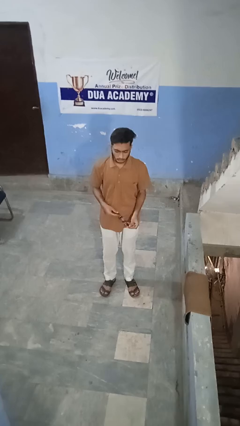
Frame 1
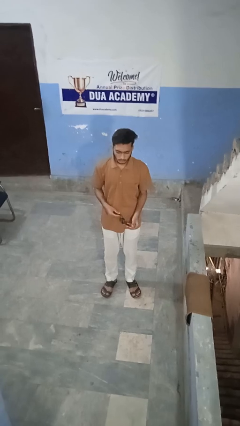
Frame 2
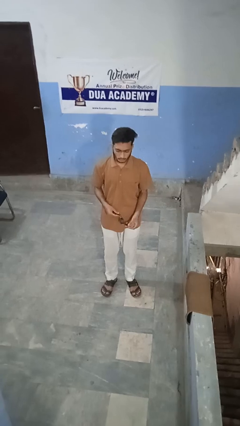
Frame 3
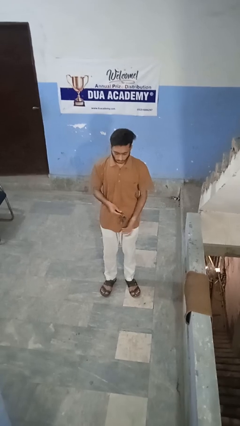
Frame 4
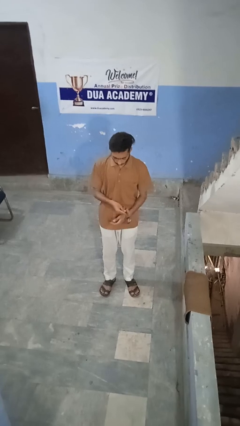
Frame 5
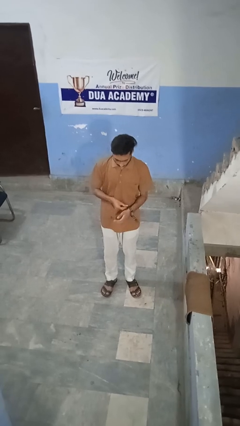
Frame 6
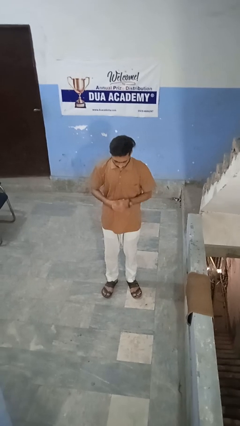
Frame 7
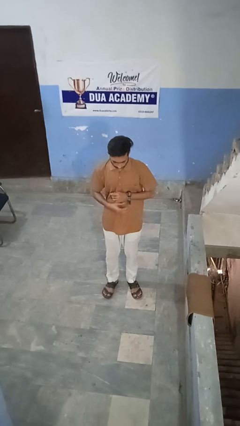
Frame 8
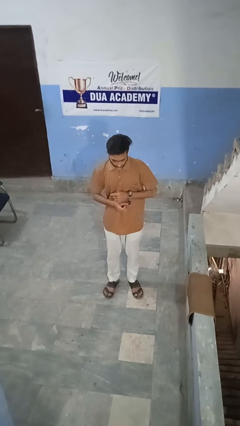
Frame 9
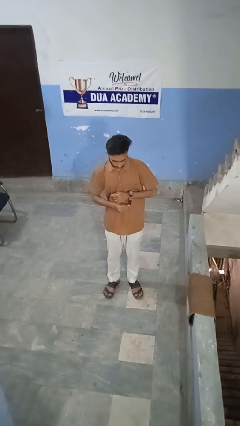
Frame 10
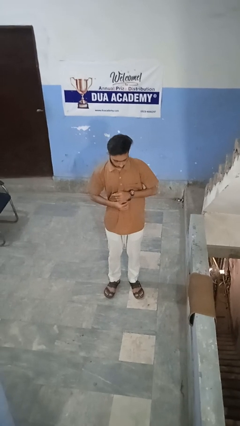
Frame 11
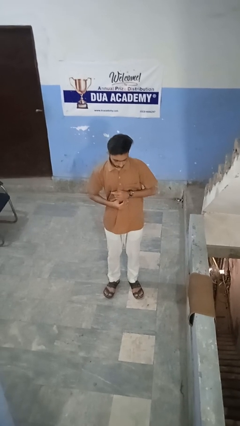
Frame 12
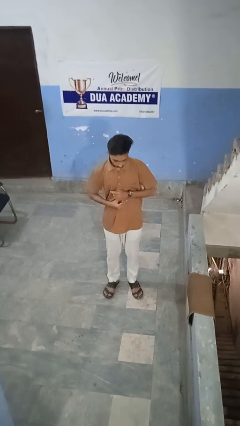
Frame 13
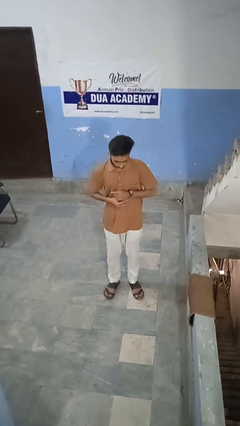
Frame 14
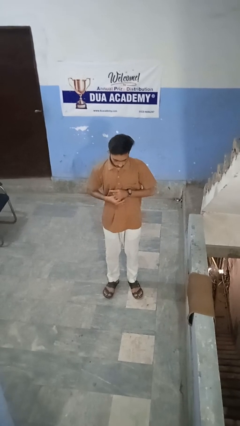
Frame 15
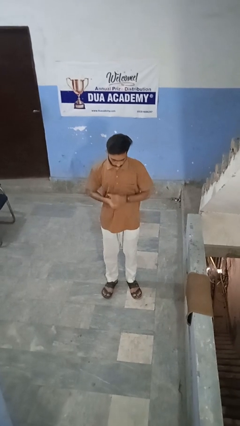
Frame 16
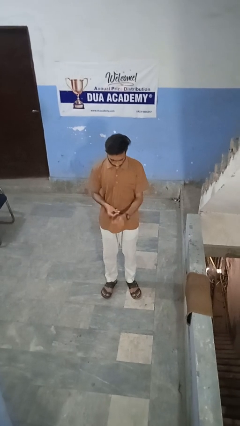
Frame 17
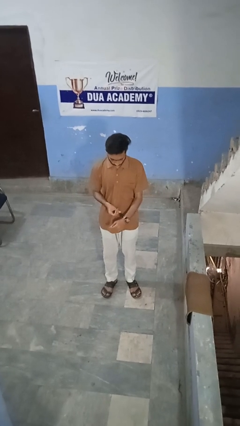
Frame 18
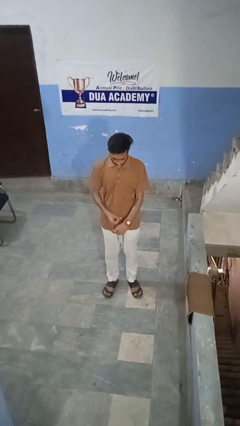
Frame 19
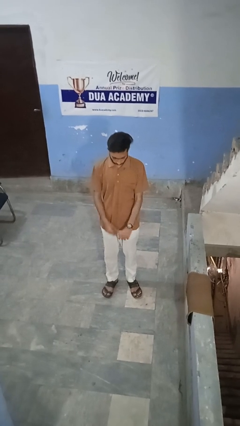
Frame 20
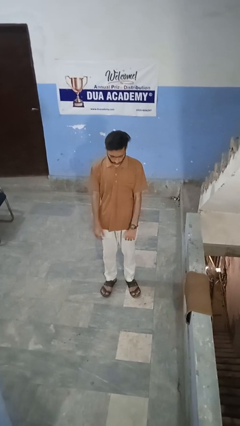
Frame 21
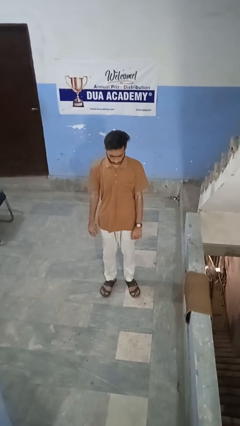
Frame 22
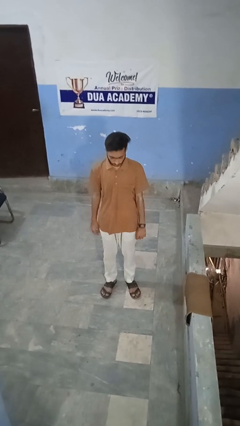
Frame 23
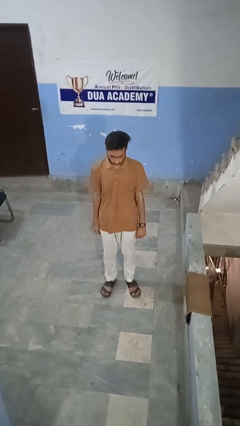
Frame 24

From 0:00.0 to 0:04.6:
person puts on wristwatch

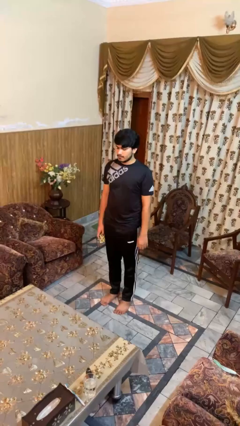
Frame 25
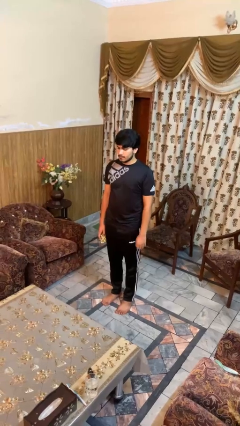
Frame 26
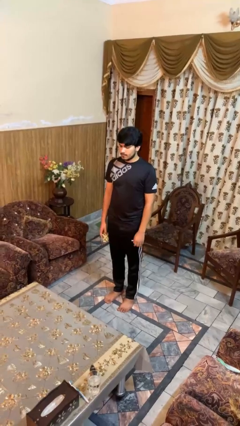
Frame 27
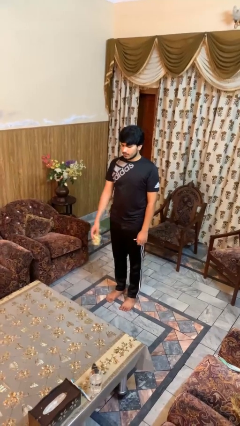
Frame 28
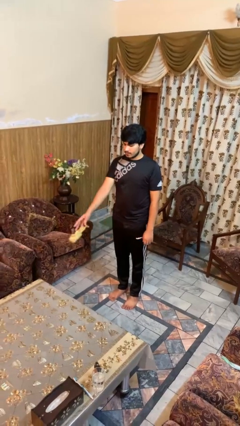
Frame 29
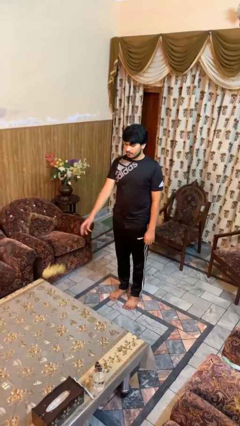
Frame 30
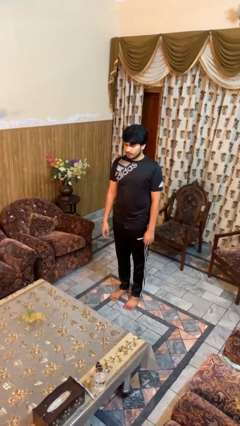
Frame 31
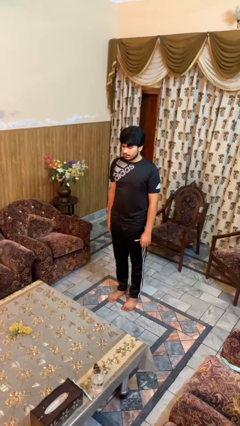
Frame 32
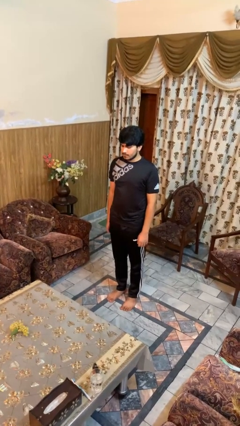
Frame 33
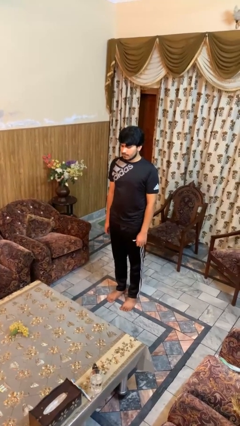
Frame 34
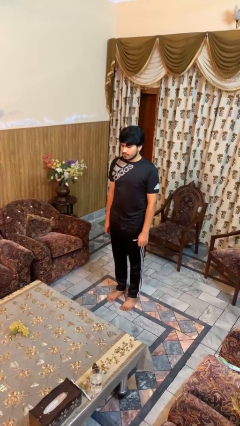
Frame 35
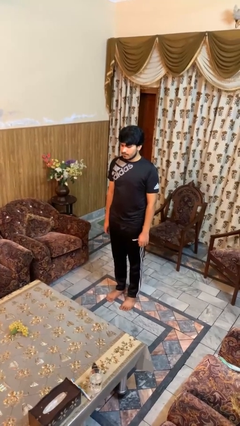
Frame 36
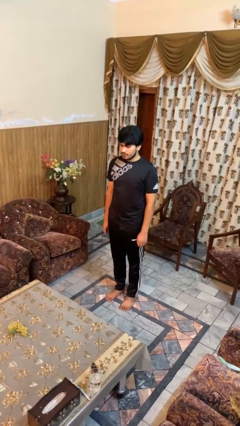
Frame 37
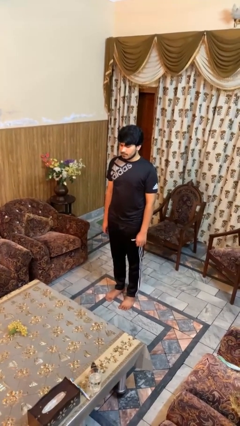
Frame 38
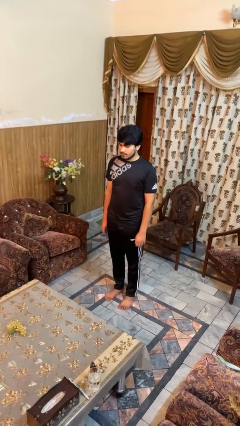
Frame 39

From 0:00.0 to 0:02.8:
person throws object on table

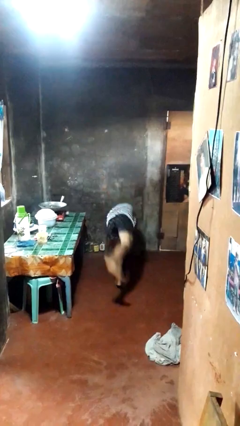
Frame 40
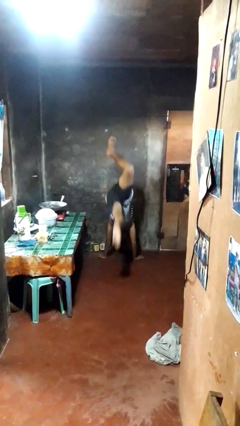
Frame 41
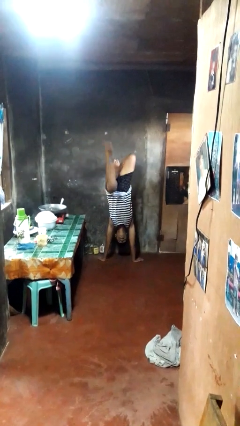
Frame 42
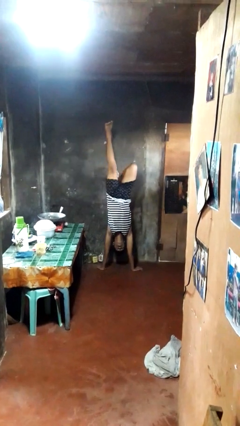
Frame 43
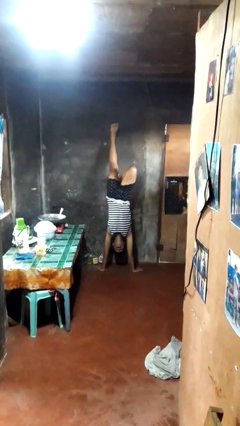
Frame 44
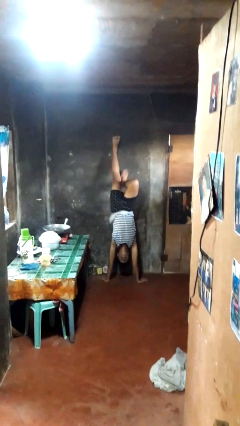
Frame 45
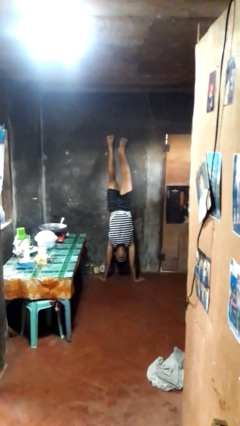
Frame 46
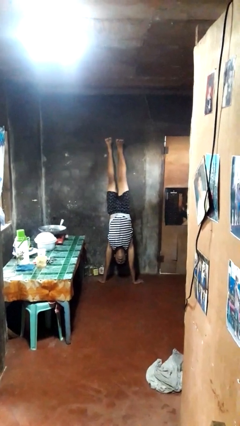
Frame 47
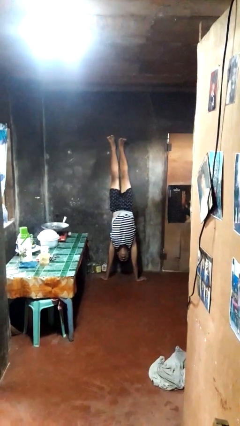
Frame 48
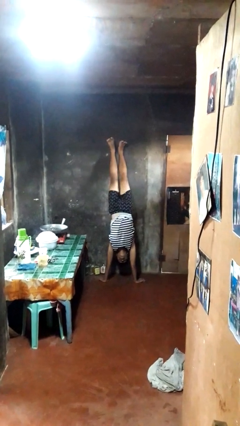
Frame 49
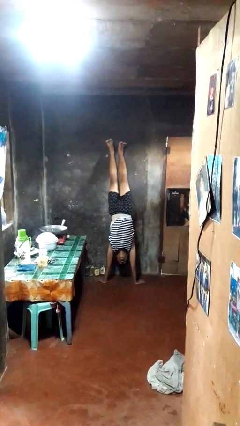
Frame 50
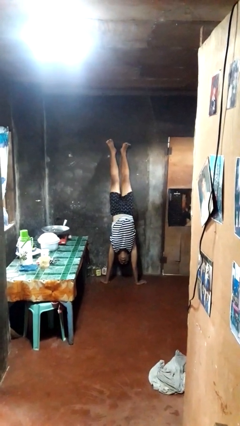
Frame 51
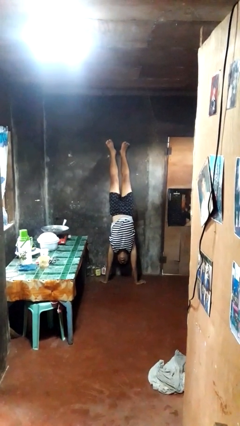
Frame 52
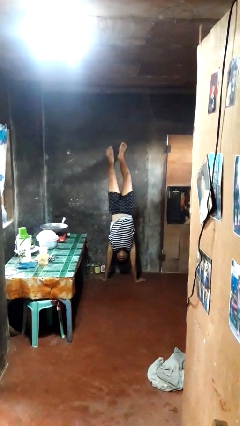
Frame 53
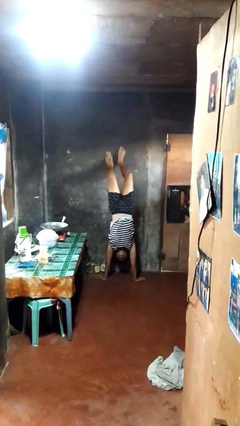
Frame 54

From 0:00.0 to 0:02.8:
person handstand

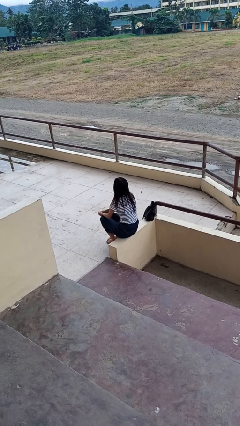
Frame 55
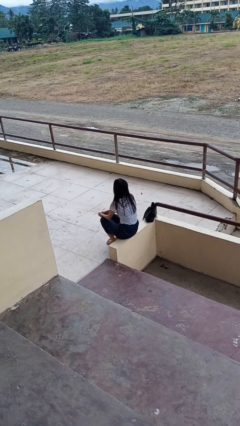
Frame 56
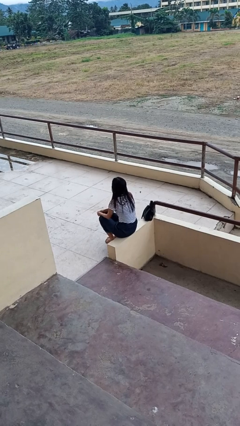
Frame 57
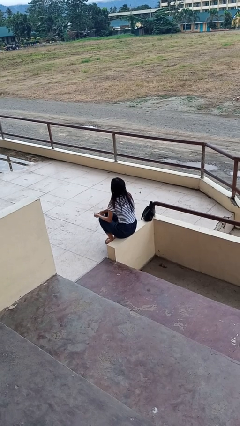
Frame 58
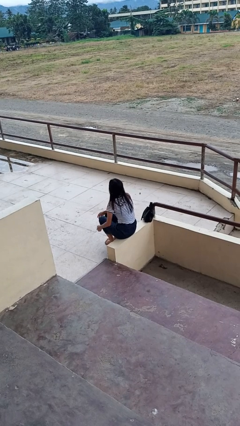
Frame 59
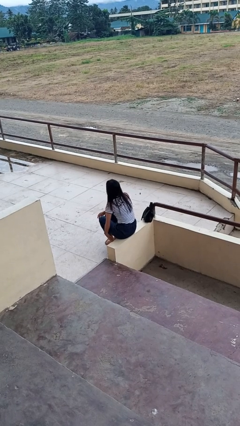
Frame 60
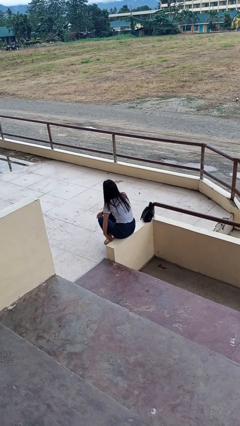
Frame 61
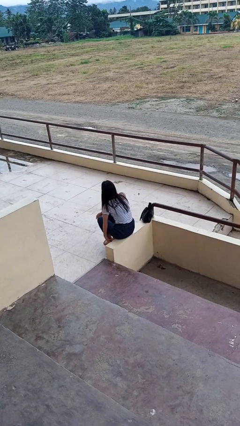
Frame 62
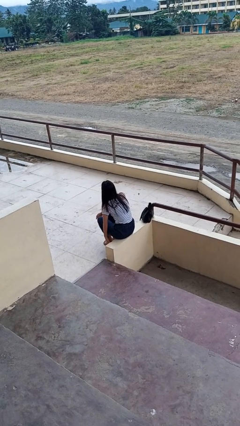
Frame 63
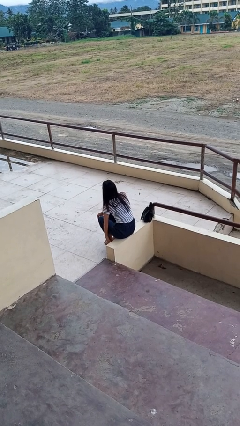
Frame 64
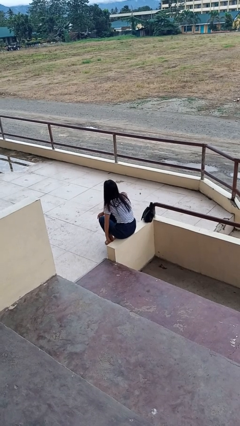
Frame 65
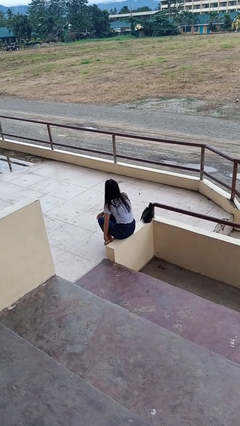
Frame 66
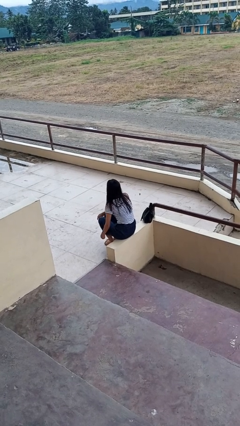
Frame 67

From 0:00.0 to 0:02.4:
person rubs foot

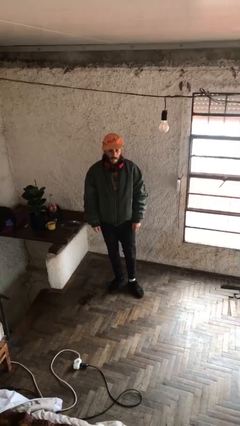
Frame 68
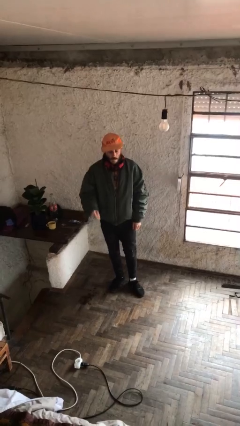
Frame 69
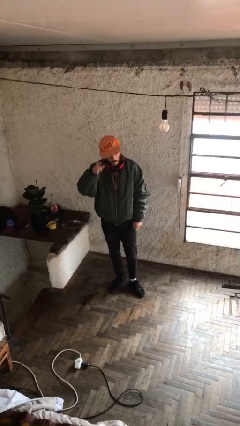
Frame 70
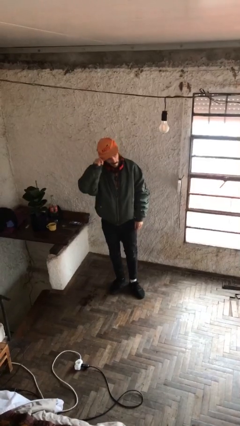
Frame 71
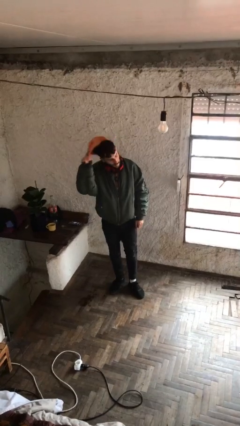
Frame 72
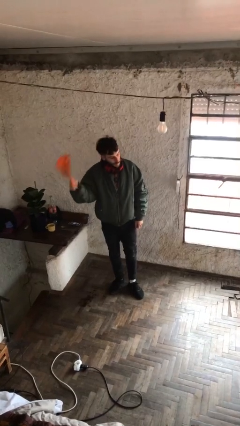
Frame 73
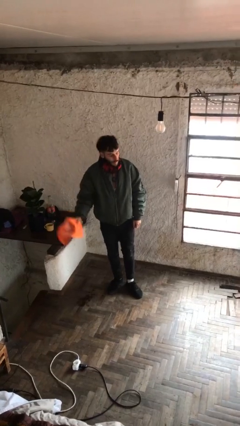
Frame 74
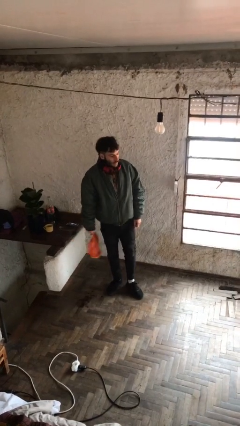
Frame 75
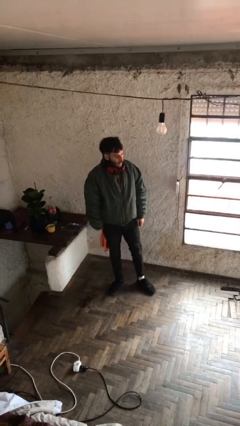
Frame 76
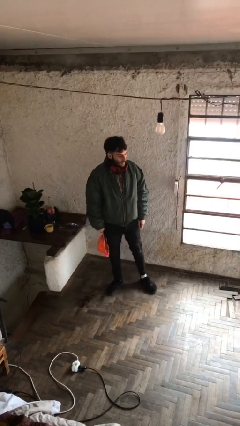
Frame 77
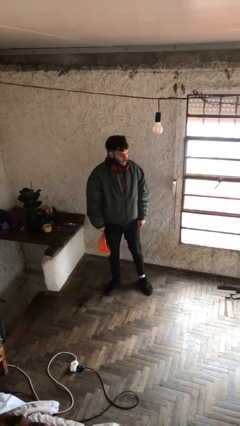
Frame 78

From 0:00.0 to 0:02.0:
person takes off hat

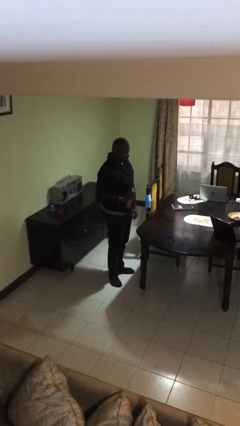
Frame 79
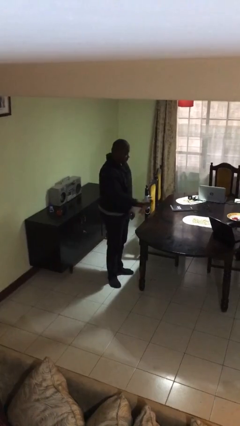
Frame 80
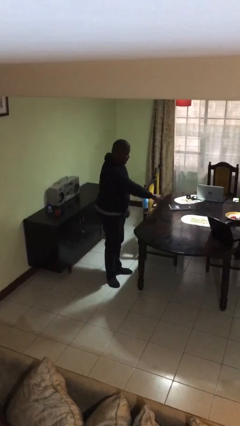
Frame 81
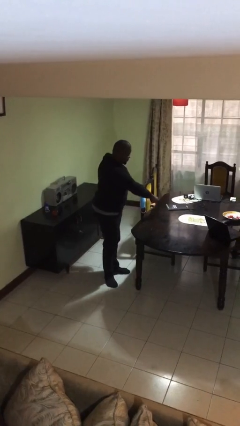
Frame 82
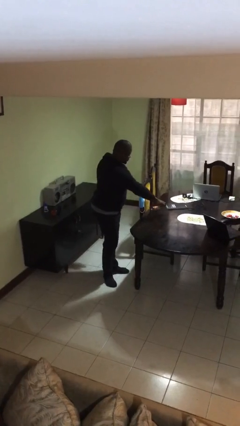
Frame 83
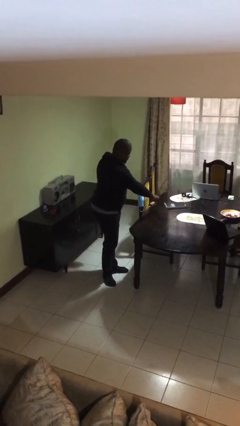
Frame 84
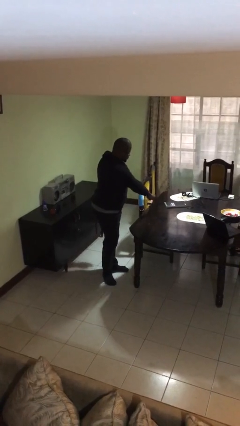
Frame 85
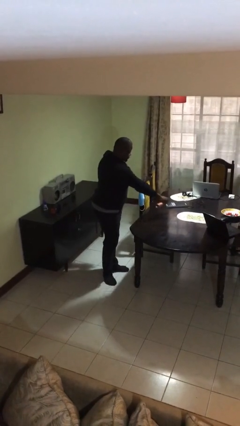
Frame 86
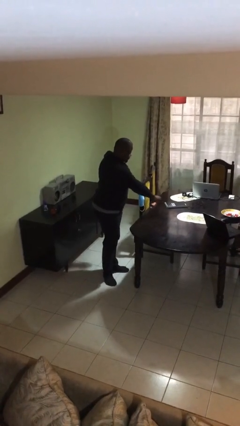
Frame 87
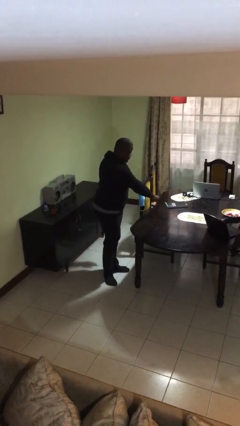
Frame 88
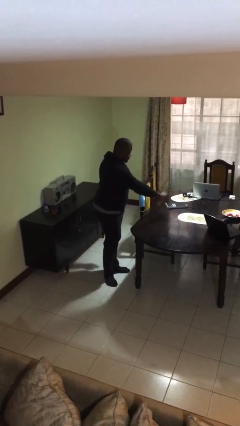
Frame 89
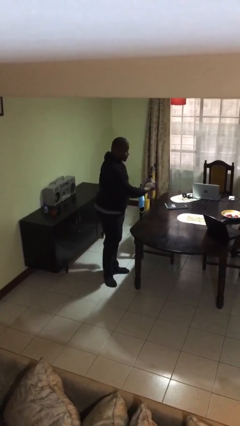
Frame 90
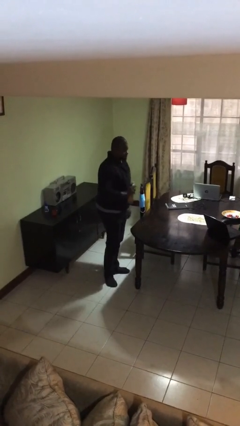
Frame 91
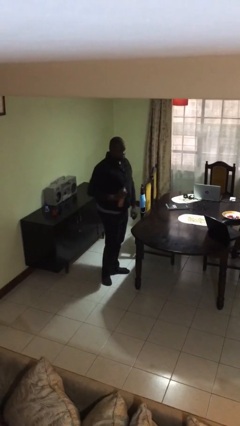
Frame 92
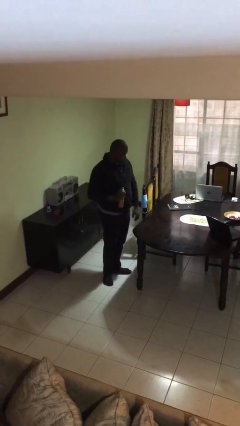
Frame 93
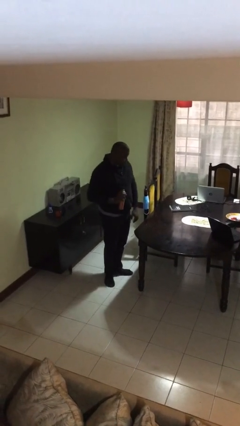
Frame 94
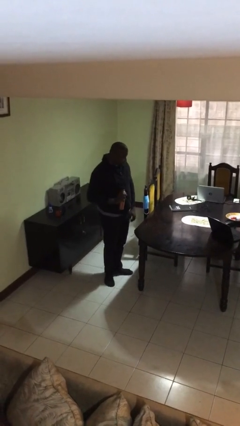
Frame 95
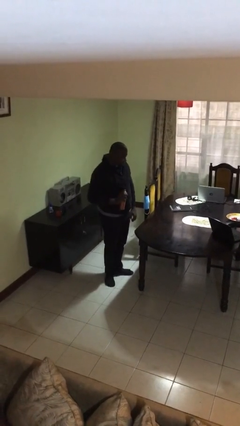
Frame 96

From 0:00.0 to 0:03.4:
person sprays from bottle
